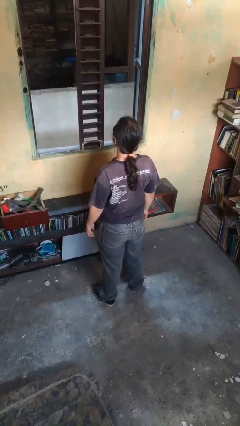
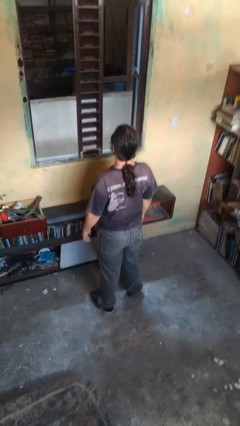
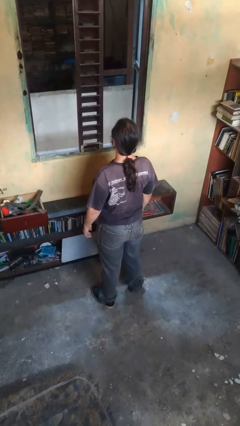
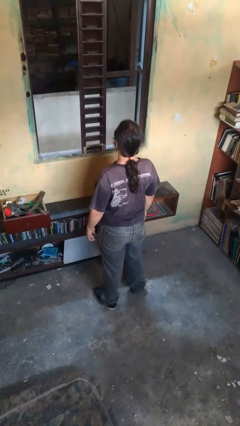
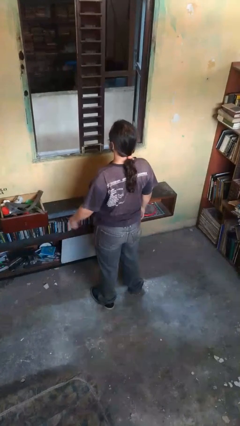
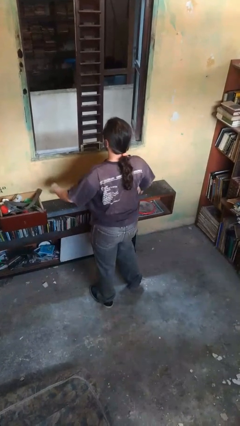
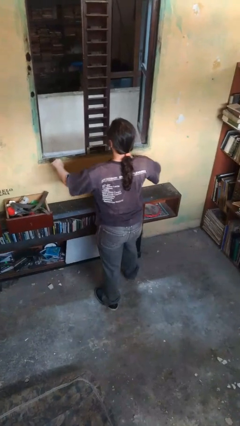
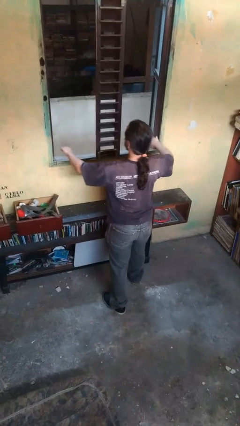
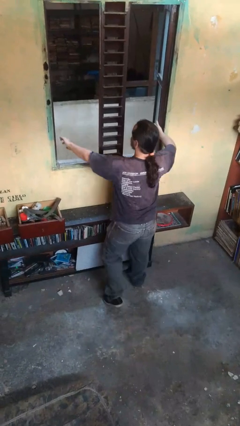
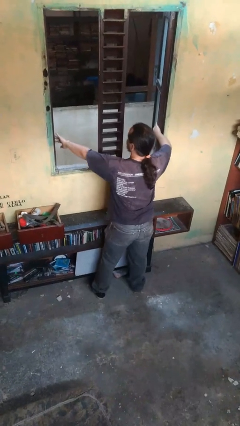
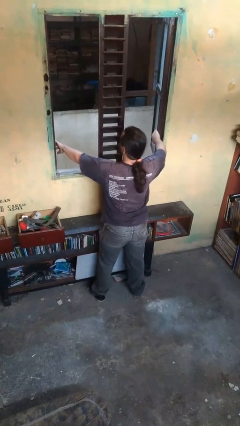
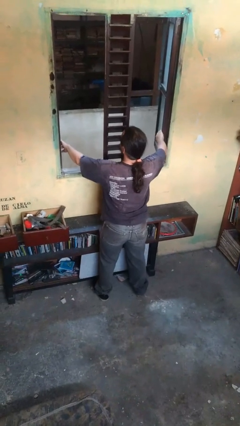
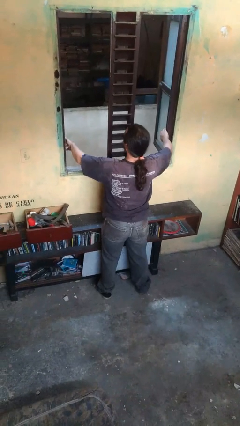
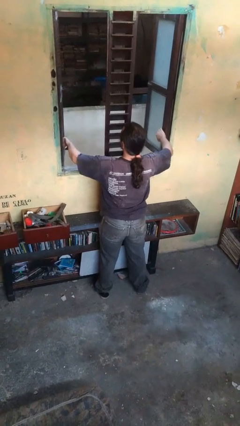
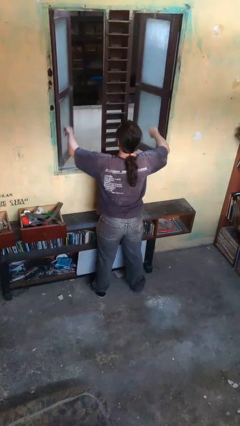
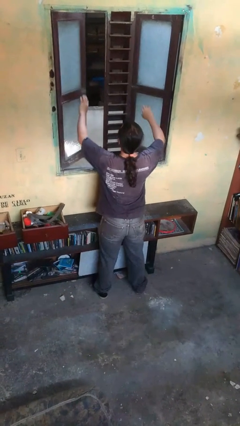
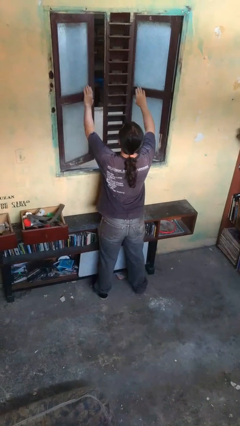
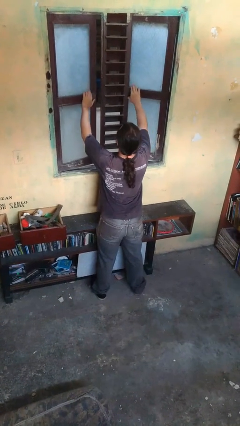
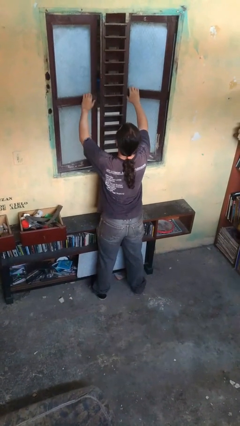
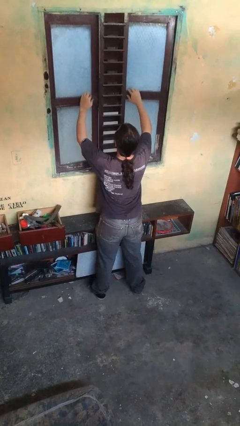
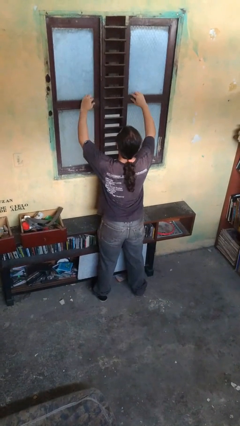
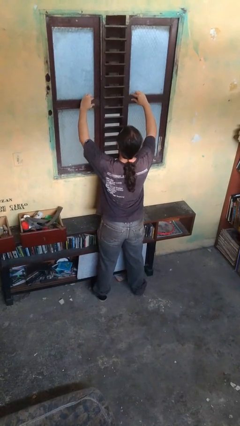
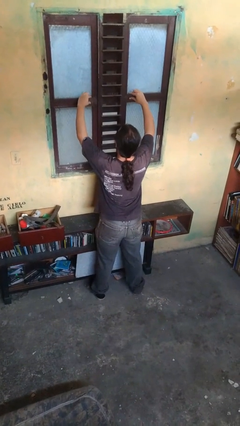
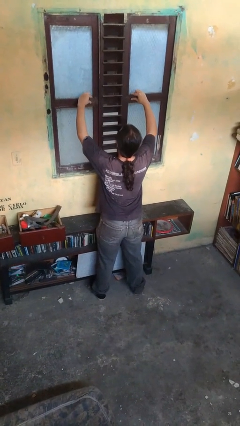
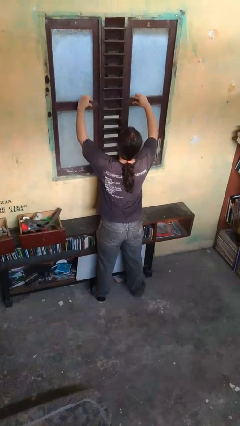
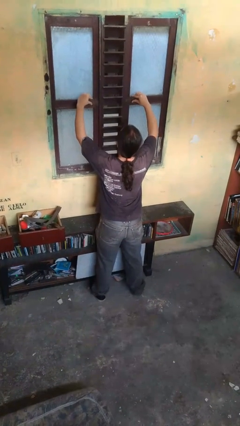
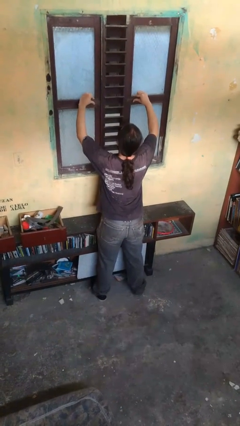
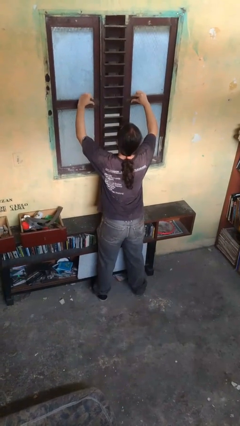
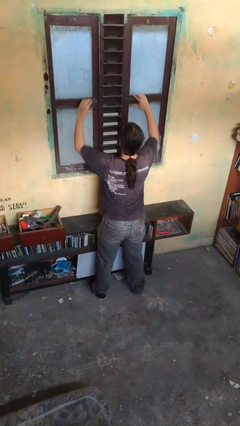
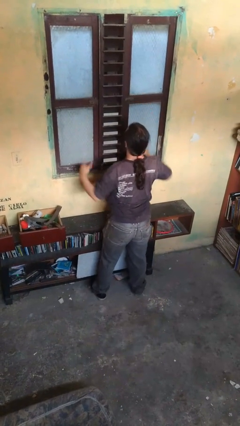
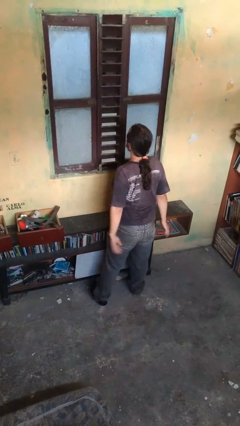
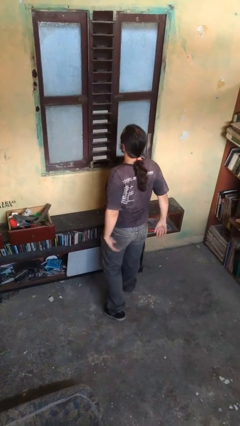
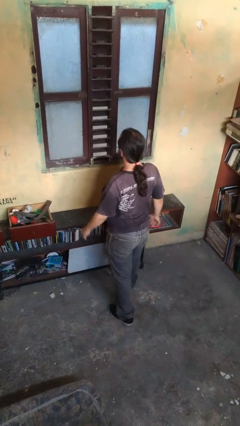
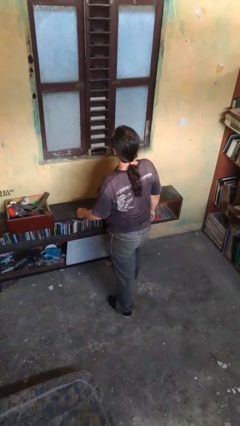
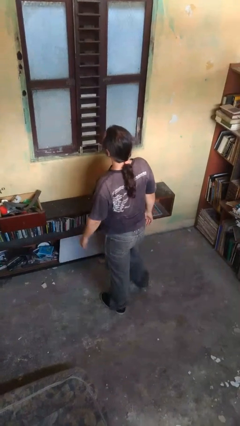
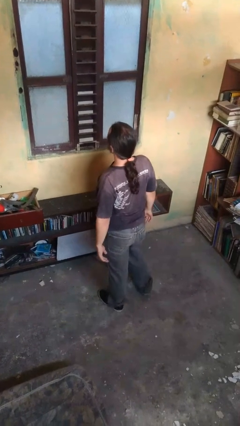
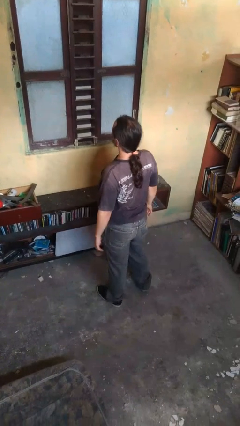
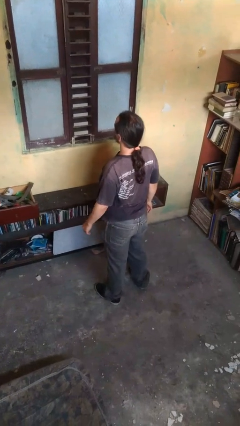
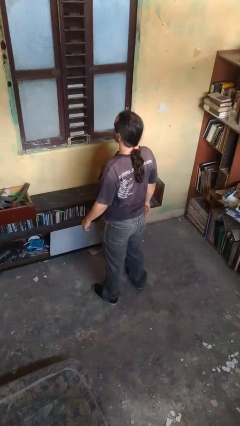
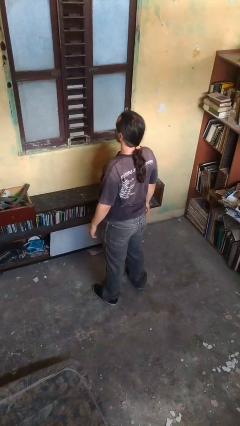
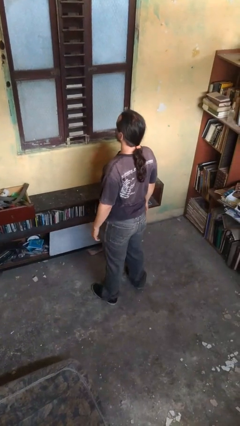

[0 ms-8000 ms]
person closes home window

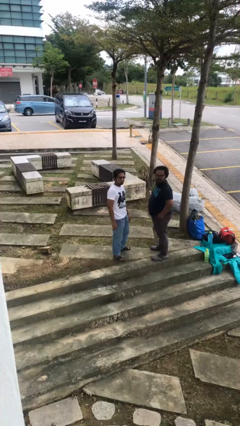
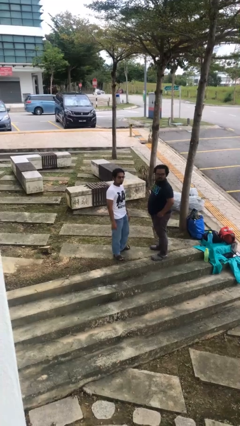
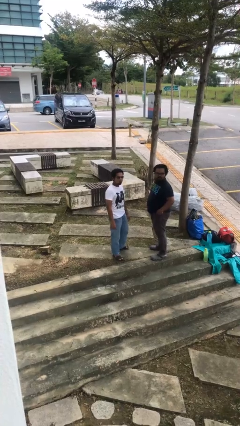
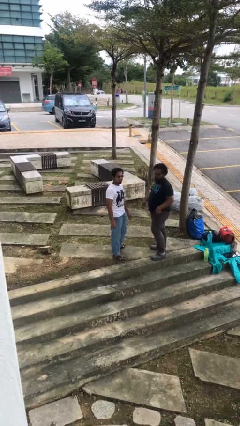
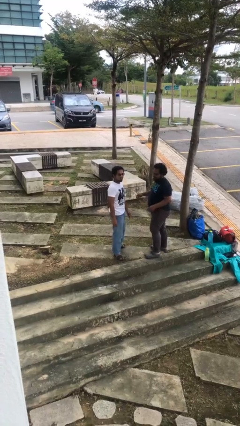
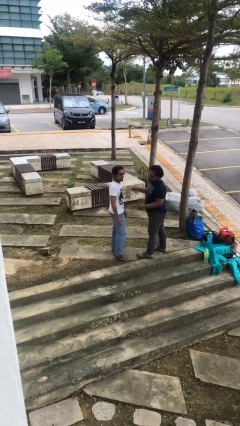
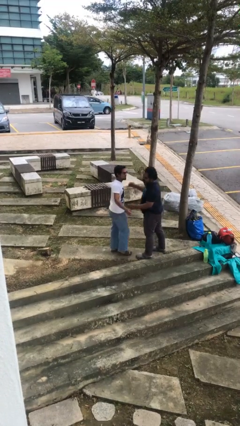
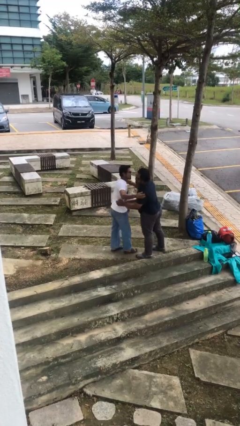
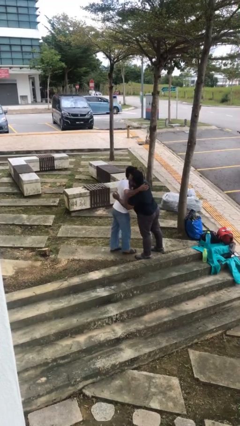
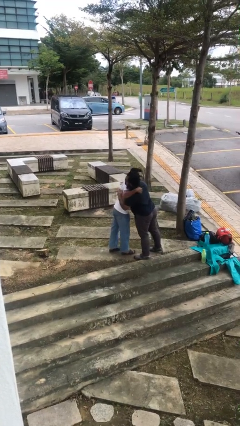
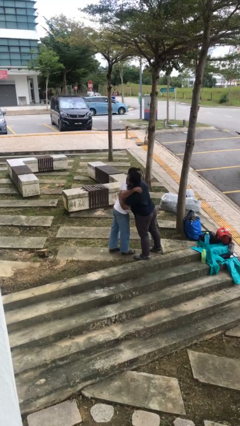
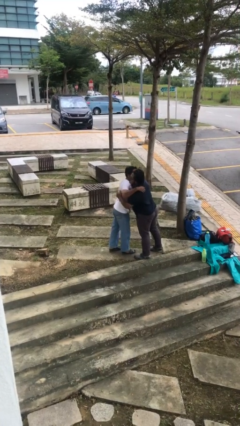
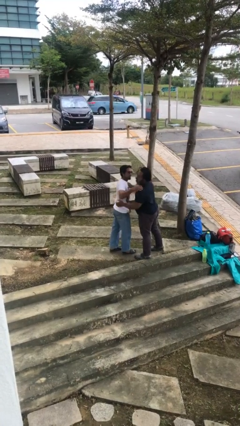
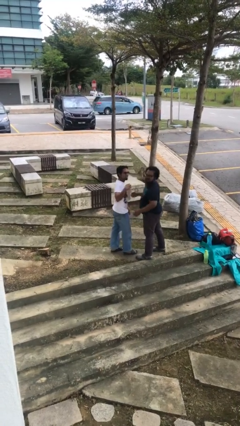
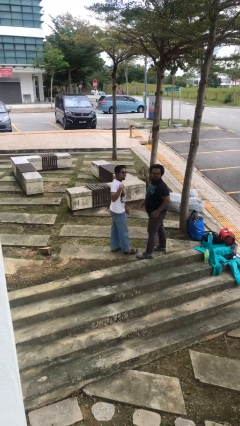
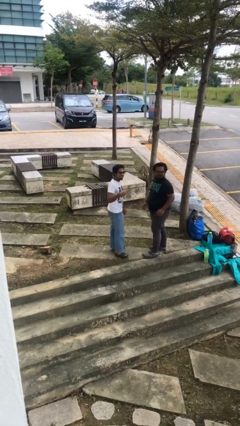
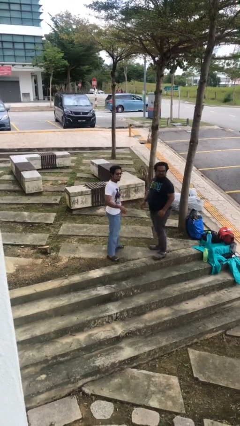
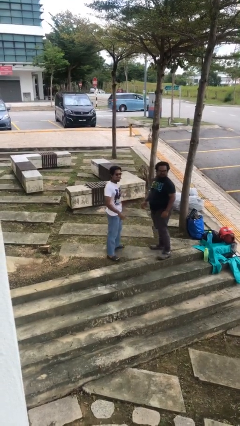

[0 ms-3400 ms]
person embraces person

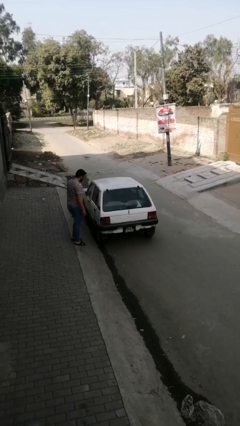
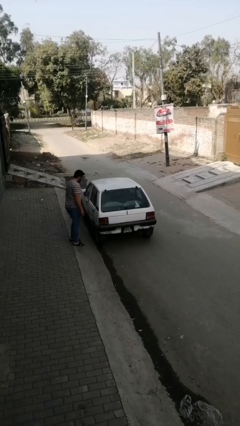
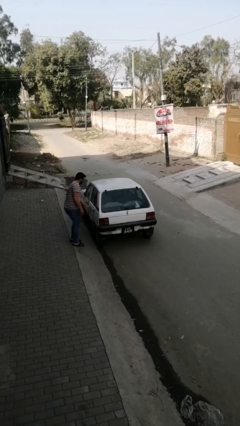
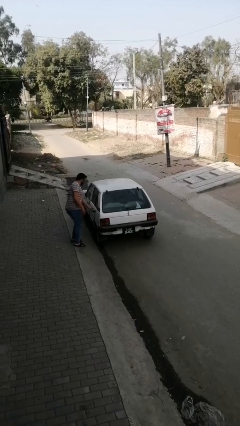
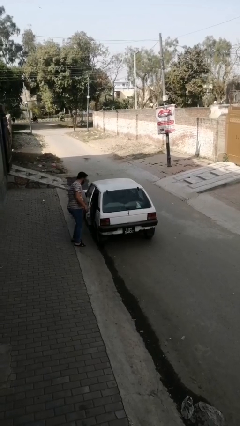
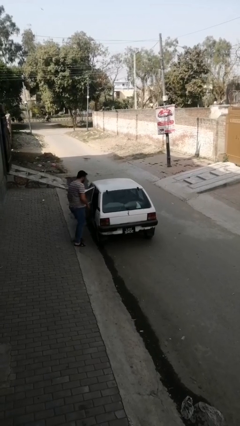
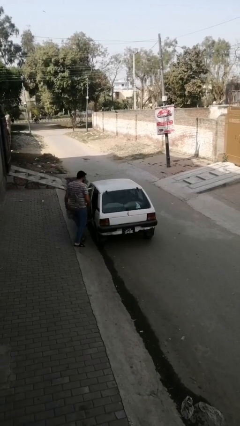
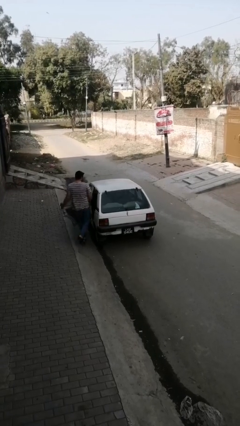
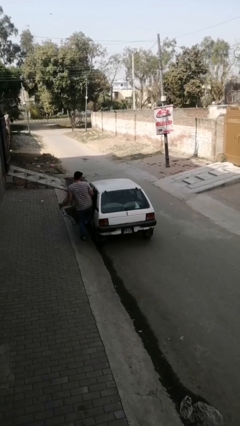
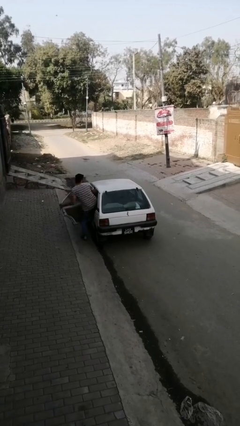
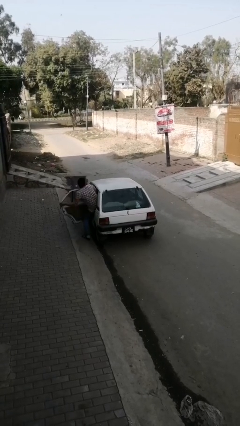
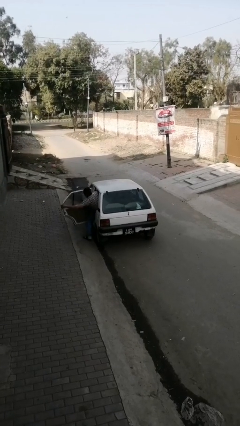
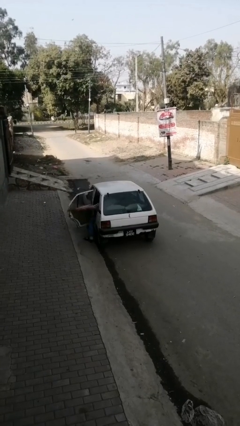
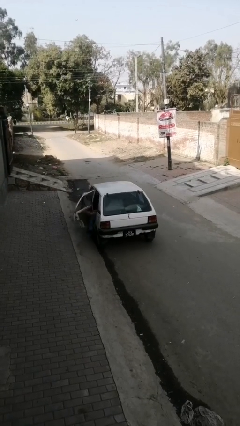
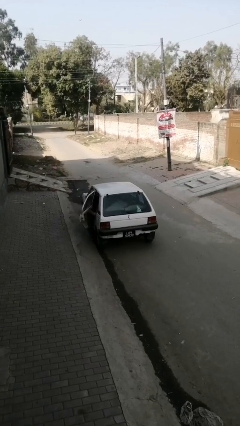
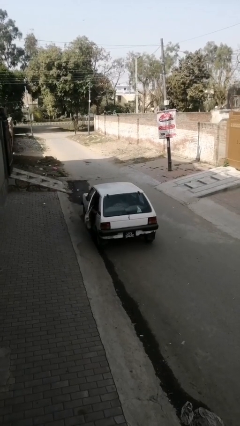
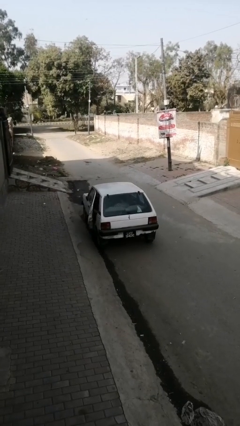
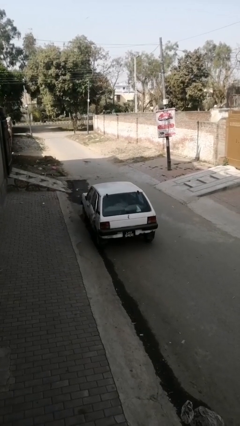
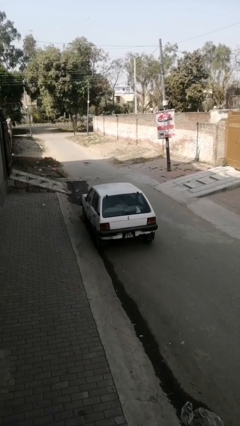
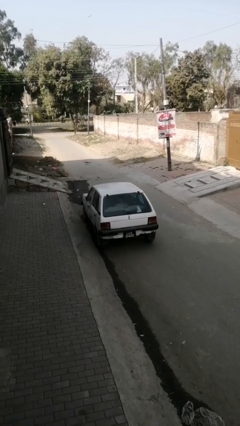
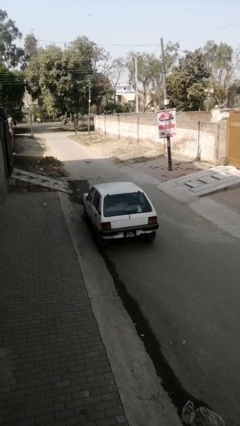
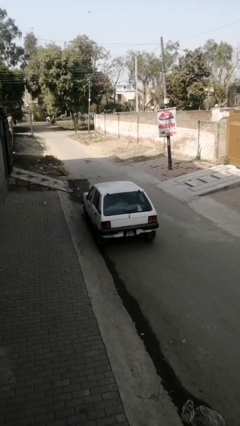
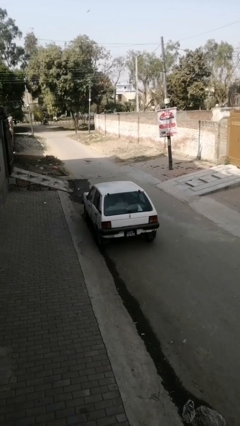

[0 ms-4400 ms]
car picks up person

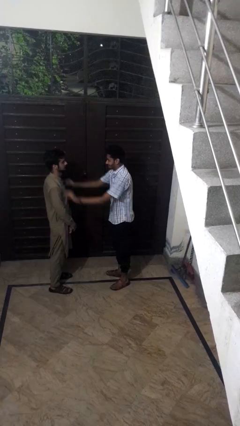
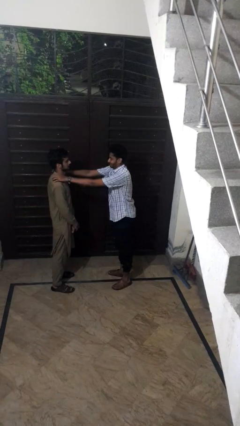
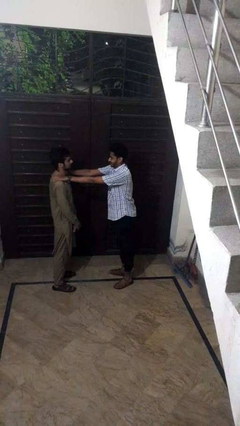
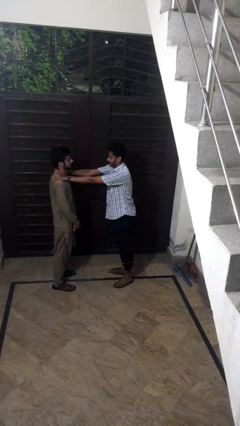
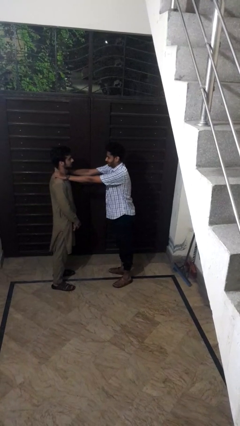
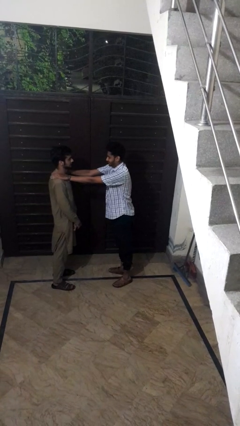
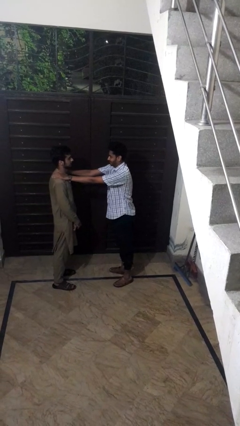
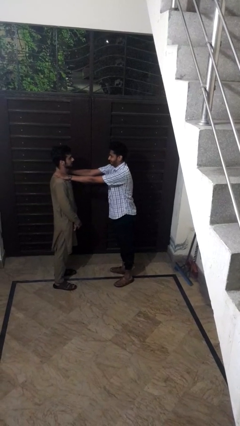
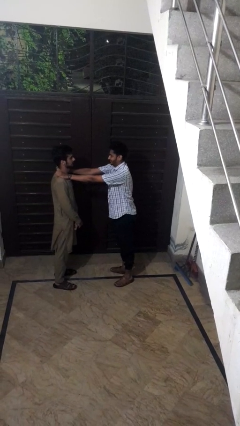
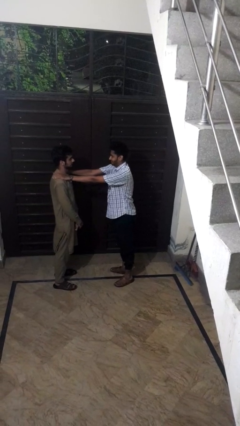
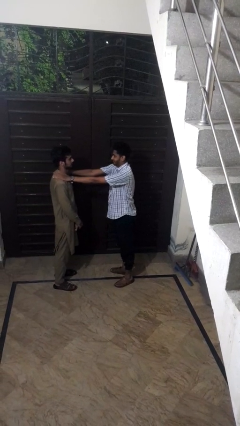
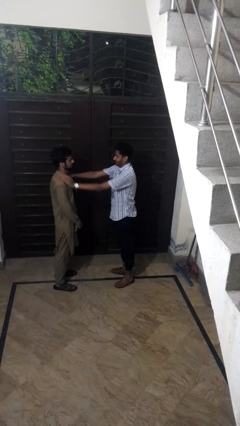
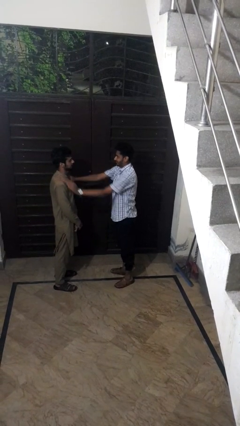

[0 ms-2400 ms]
person pounds shoulders of person
